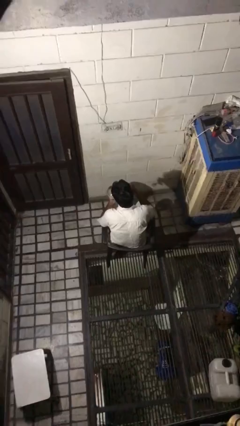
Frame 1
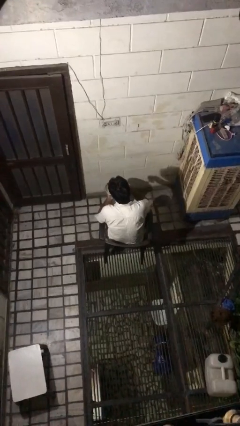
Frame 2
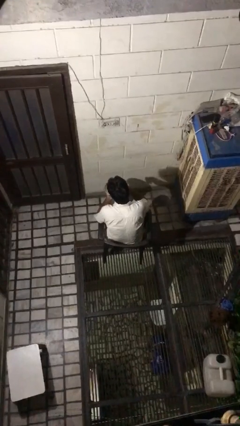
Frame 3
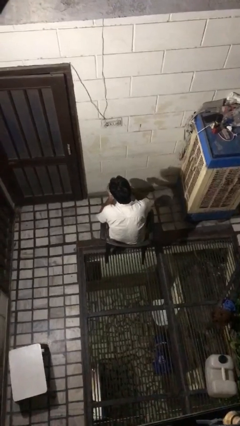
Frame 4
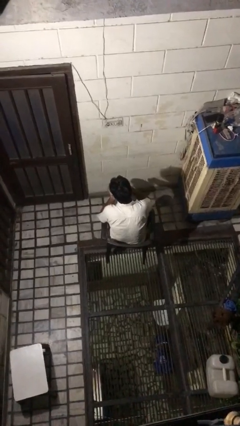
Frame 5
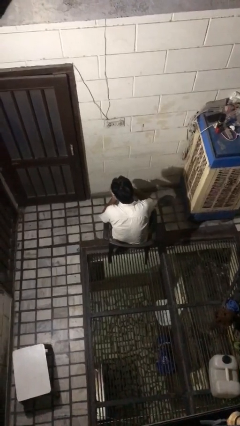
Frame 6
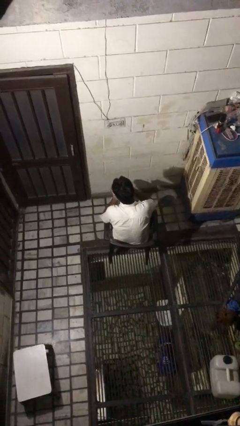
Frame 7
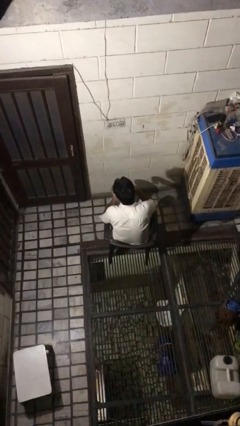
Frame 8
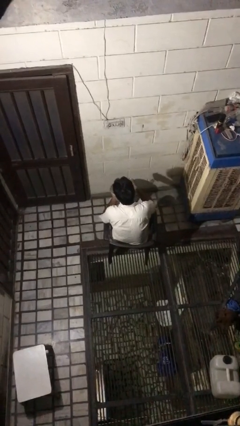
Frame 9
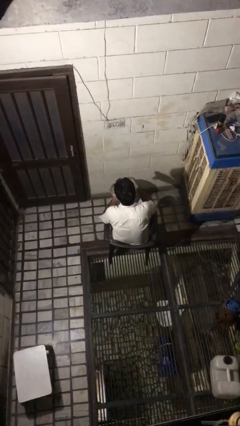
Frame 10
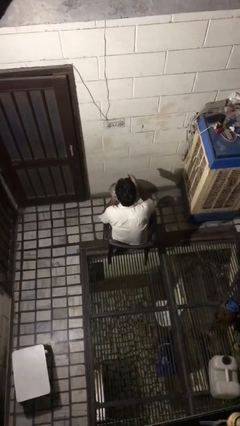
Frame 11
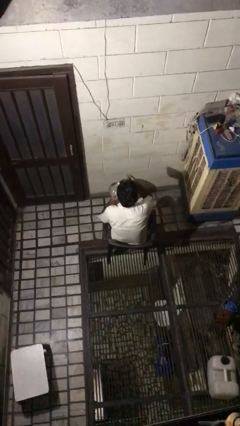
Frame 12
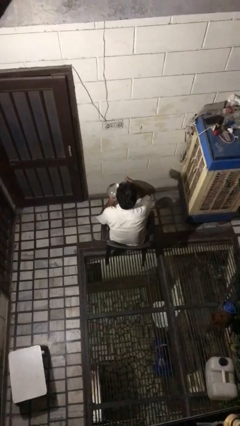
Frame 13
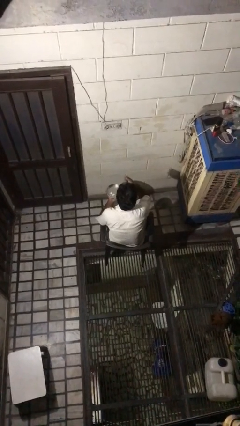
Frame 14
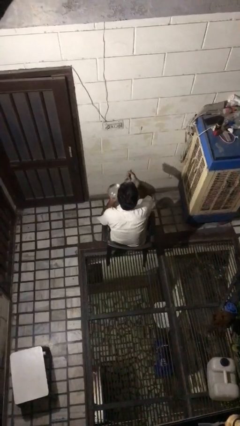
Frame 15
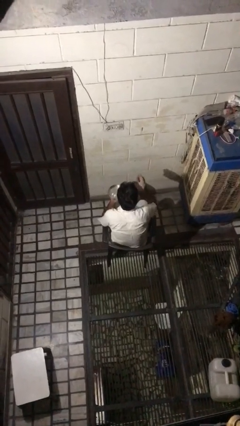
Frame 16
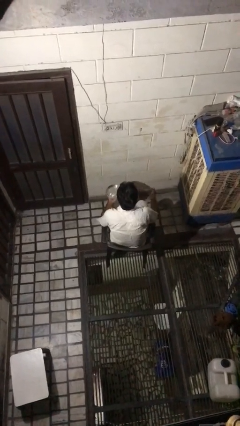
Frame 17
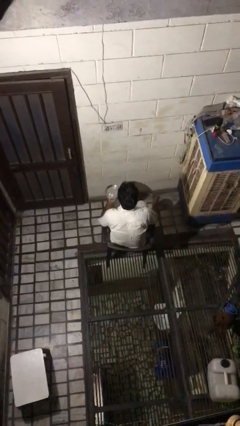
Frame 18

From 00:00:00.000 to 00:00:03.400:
person eats with utensil

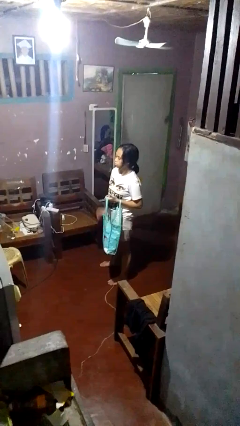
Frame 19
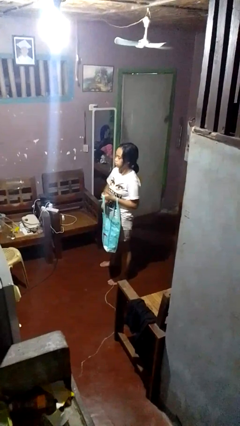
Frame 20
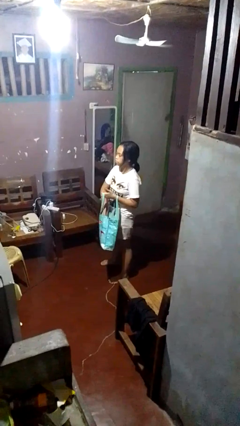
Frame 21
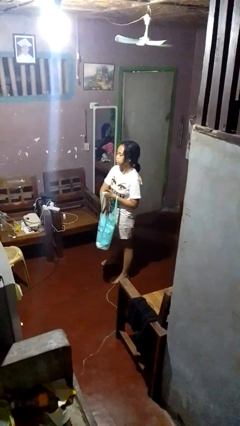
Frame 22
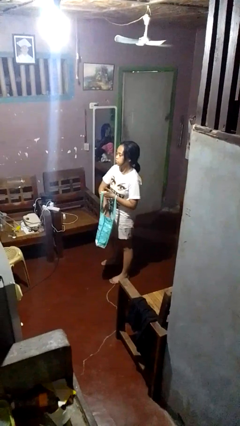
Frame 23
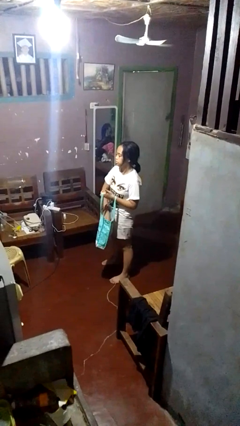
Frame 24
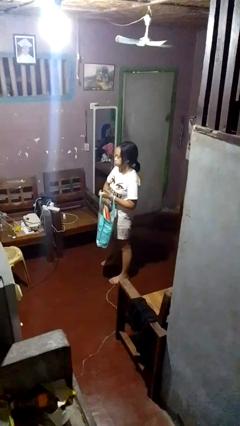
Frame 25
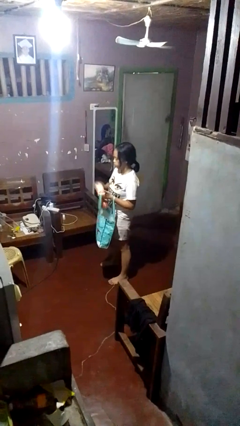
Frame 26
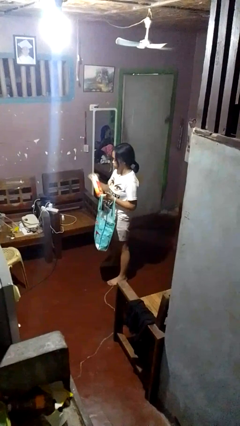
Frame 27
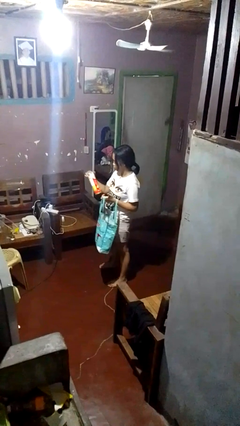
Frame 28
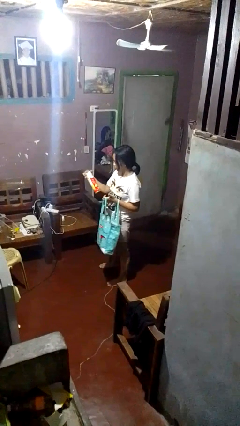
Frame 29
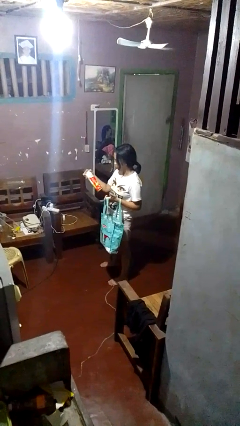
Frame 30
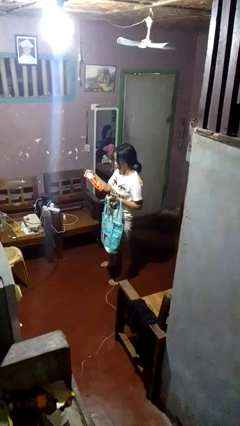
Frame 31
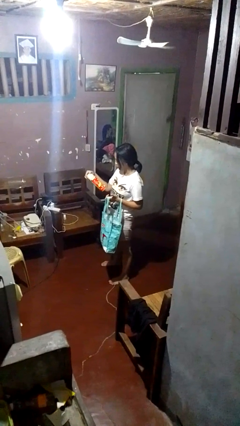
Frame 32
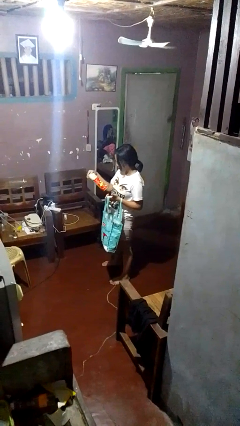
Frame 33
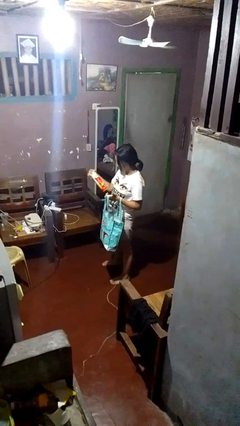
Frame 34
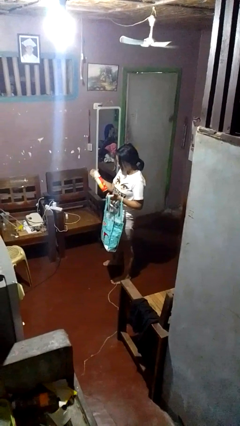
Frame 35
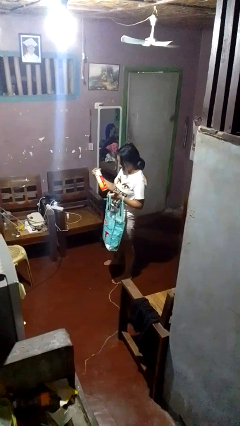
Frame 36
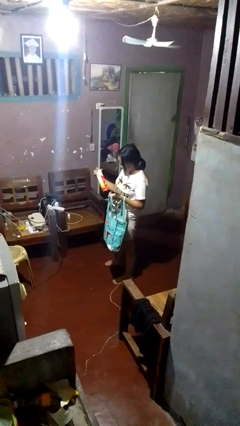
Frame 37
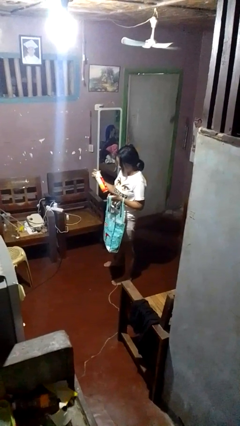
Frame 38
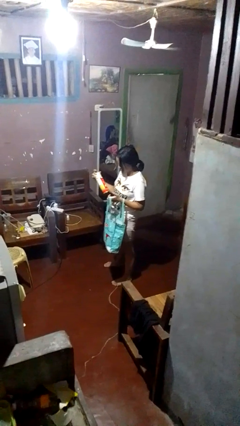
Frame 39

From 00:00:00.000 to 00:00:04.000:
person takes object from bag

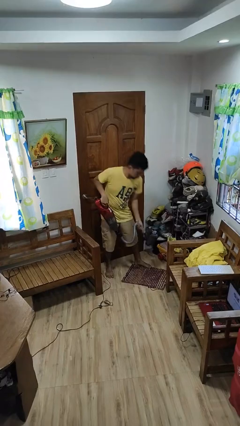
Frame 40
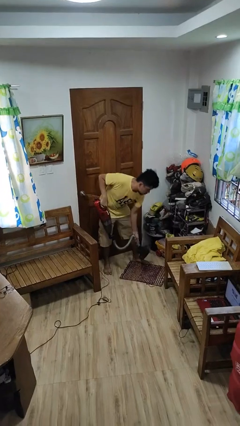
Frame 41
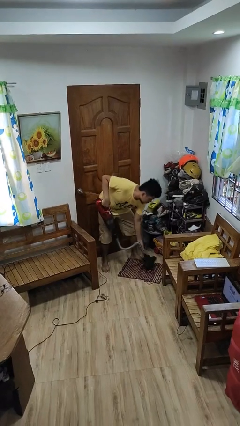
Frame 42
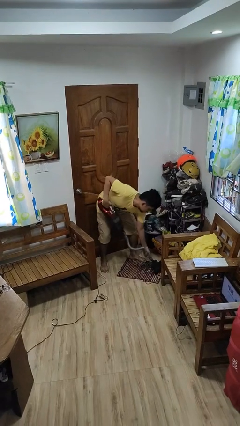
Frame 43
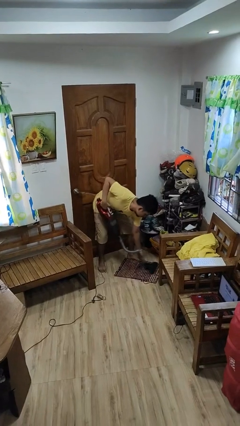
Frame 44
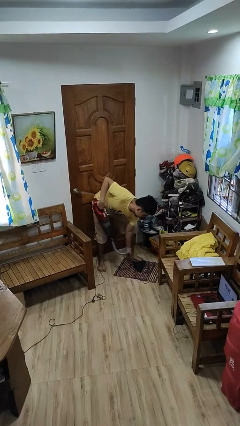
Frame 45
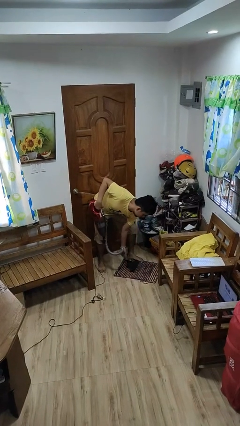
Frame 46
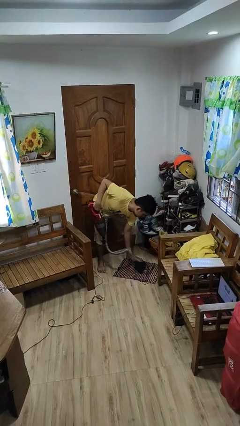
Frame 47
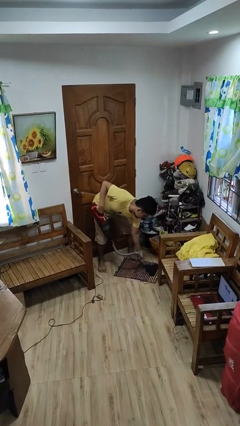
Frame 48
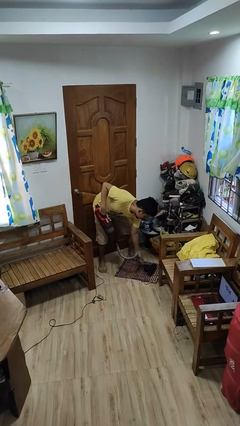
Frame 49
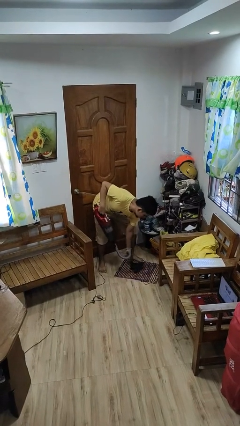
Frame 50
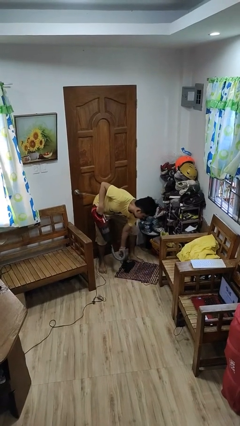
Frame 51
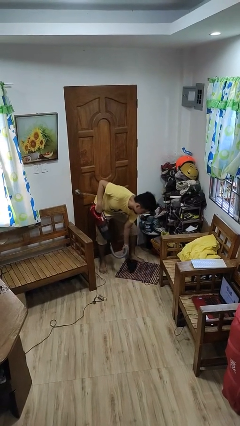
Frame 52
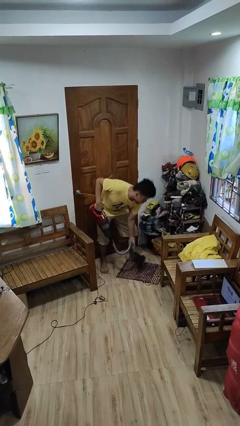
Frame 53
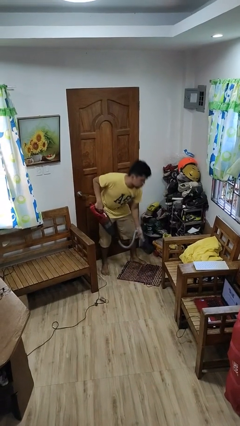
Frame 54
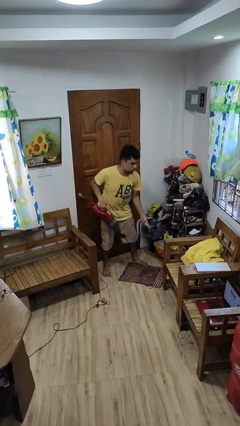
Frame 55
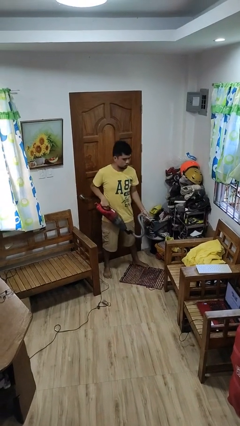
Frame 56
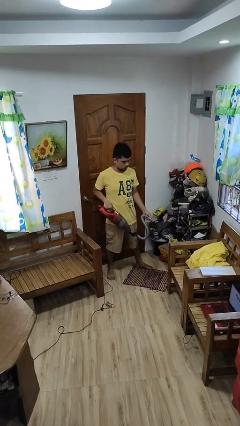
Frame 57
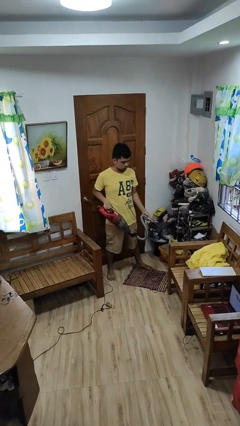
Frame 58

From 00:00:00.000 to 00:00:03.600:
person vacuums carpet

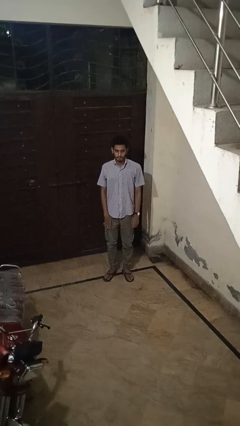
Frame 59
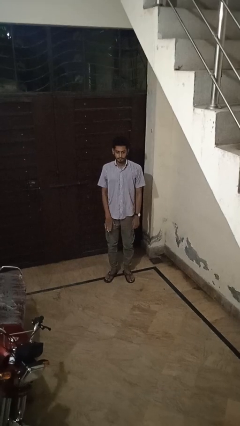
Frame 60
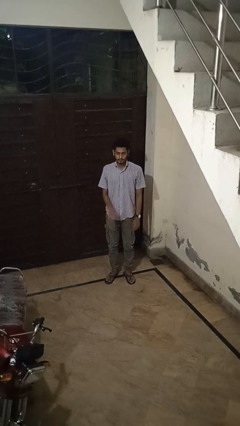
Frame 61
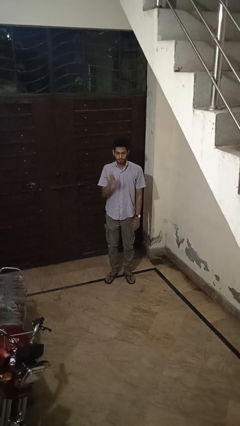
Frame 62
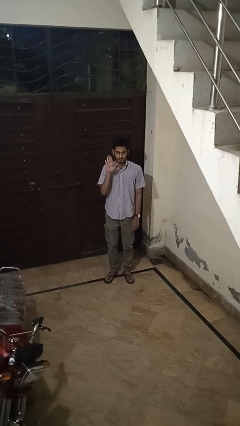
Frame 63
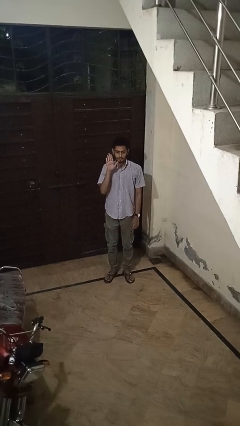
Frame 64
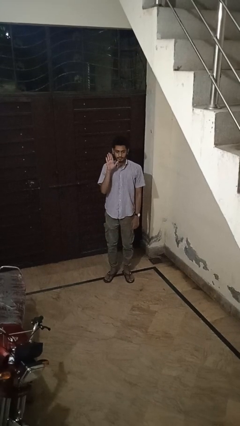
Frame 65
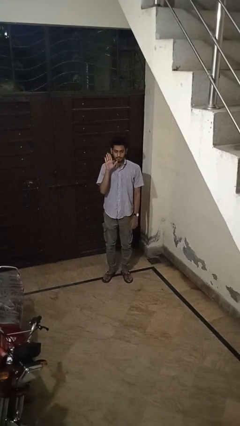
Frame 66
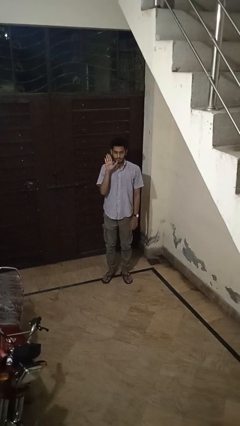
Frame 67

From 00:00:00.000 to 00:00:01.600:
person gestures raise hand

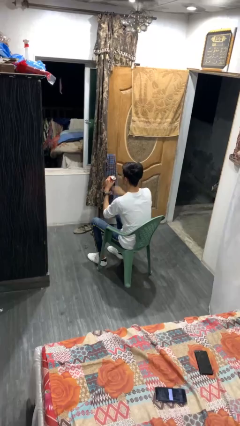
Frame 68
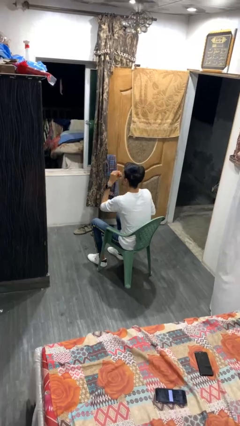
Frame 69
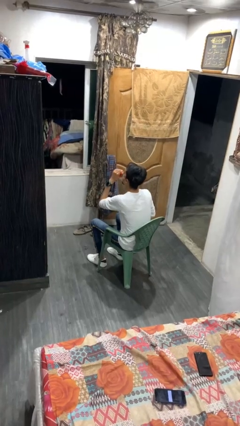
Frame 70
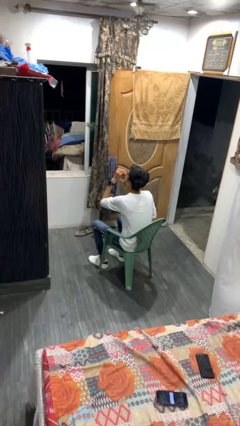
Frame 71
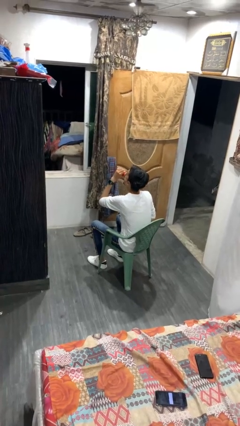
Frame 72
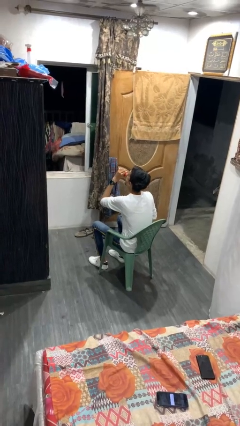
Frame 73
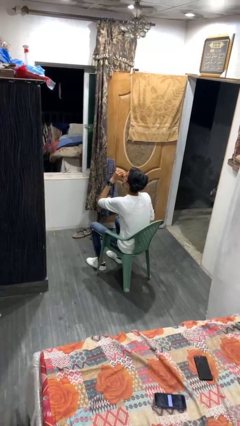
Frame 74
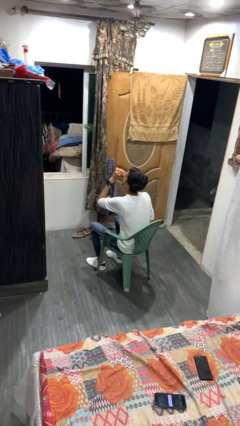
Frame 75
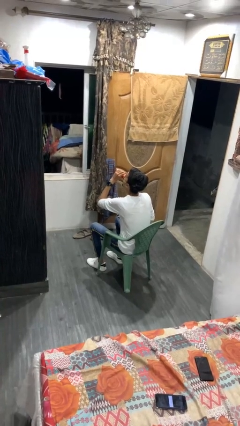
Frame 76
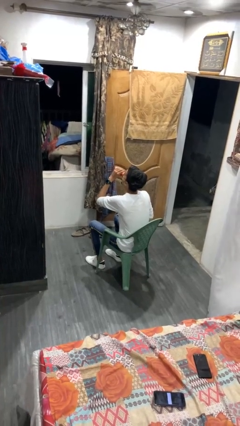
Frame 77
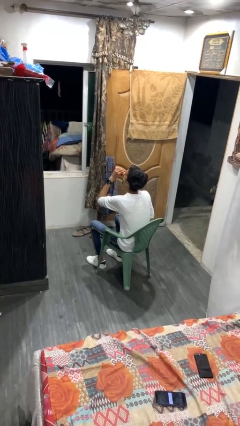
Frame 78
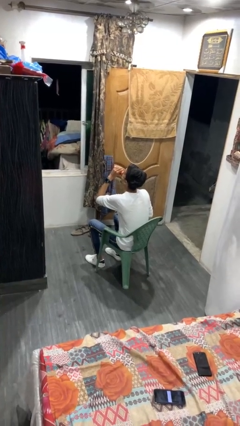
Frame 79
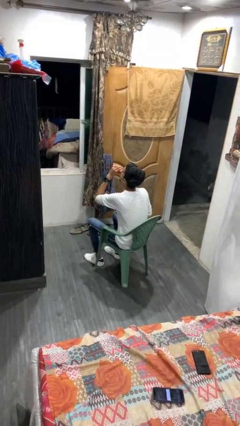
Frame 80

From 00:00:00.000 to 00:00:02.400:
person drinks from beverage can

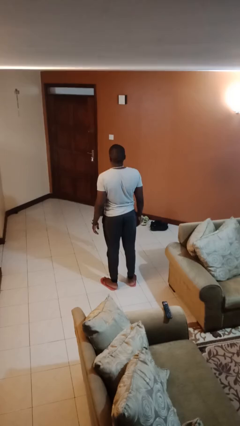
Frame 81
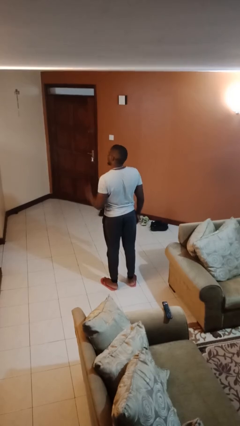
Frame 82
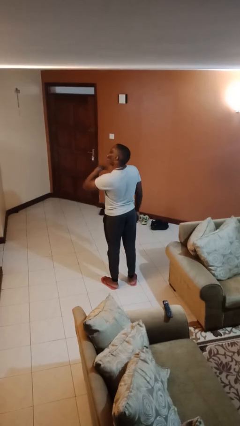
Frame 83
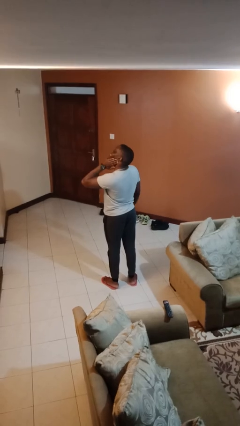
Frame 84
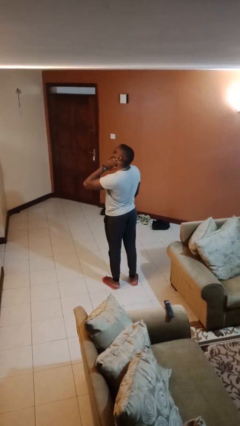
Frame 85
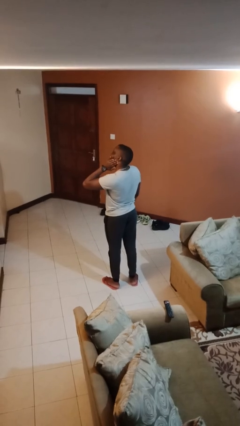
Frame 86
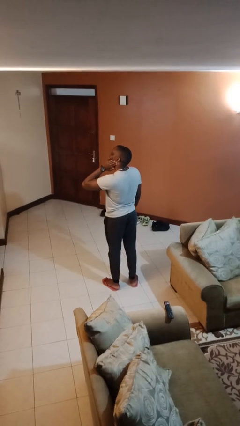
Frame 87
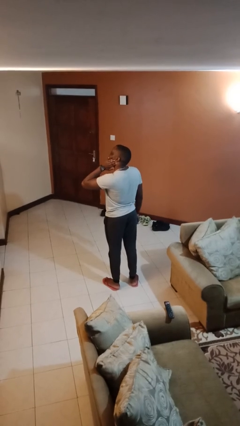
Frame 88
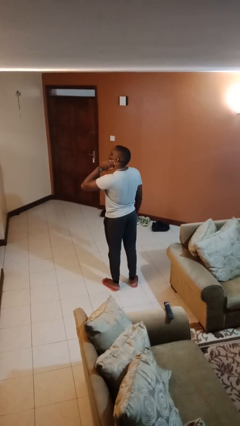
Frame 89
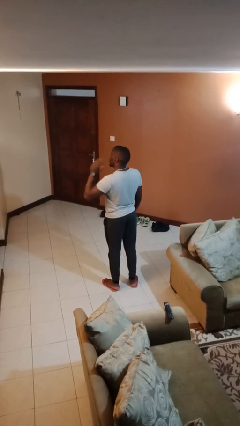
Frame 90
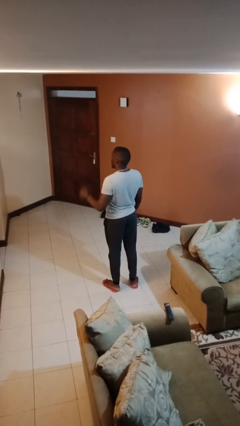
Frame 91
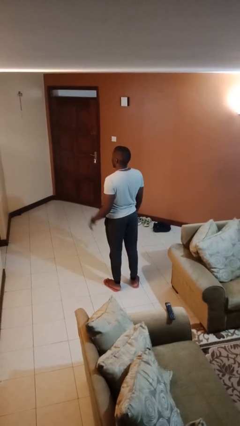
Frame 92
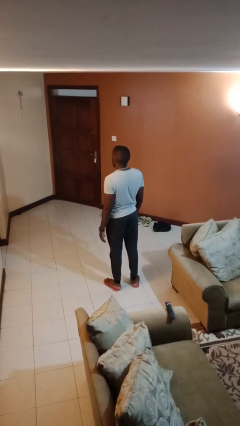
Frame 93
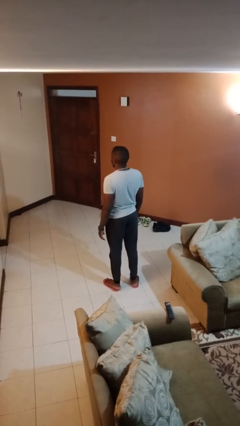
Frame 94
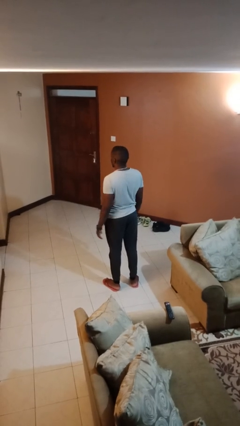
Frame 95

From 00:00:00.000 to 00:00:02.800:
person swats bug
